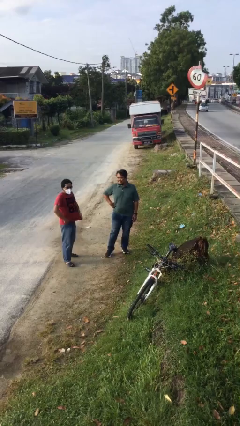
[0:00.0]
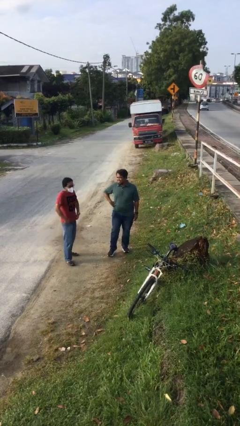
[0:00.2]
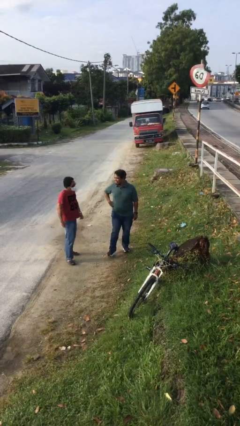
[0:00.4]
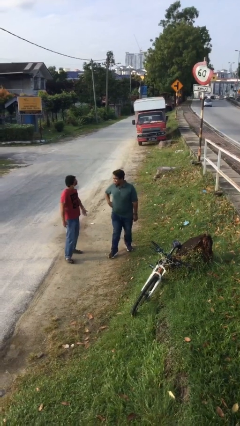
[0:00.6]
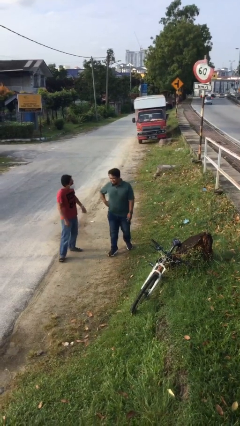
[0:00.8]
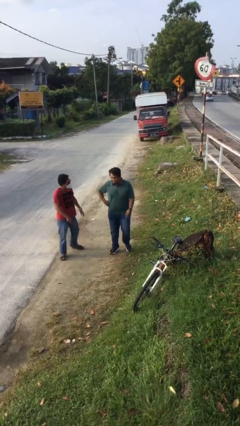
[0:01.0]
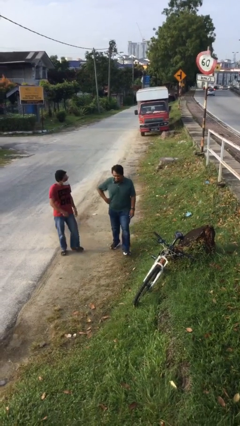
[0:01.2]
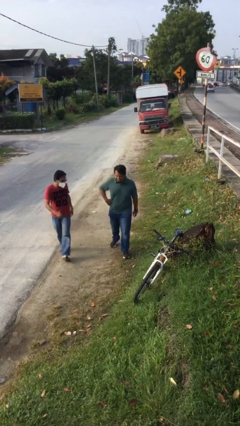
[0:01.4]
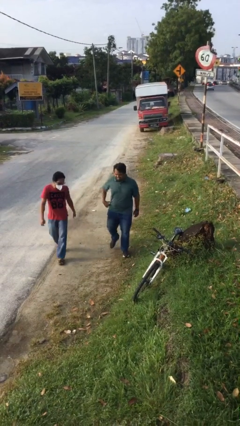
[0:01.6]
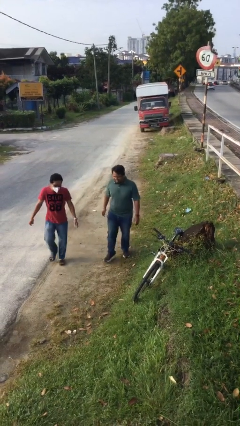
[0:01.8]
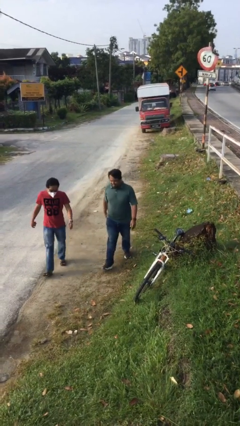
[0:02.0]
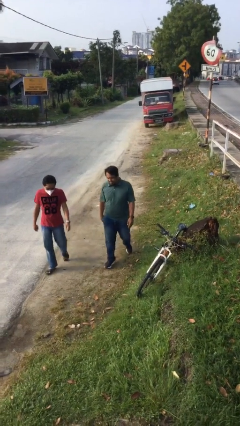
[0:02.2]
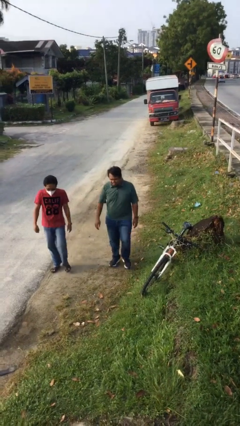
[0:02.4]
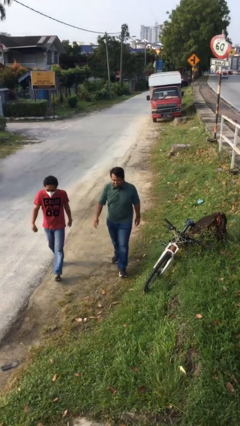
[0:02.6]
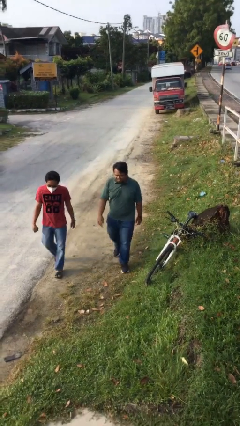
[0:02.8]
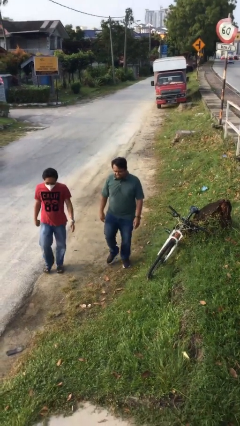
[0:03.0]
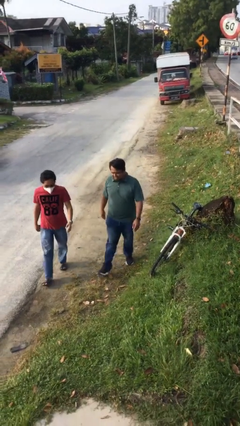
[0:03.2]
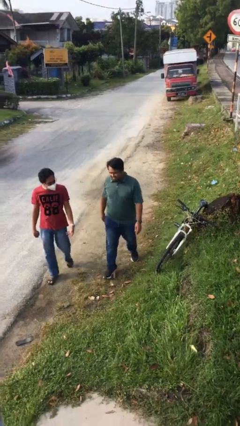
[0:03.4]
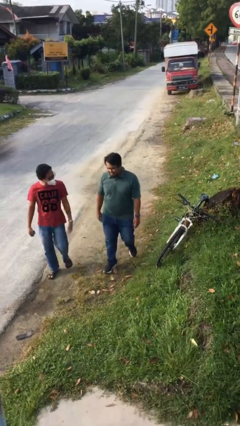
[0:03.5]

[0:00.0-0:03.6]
person talks to person

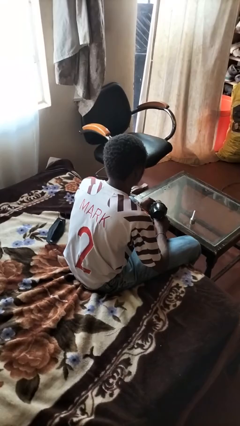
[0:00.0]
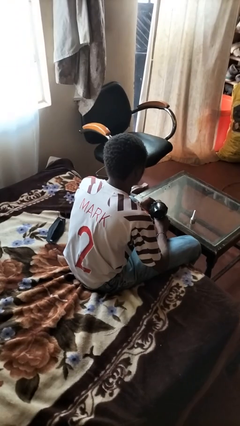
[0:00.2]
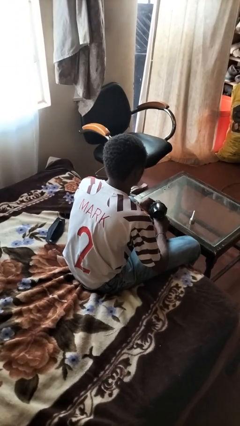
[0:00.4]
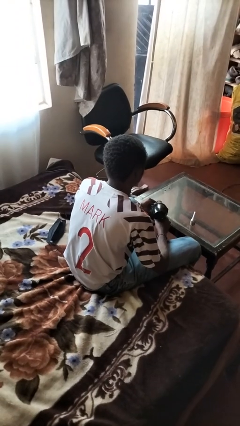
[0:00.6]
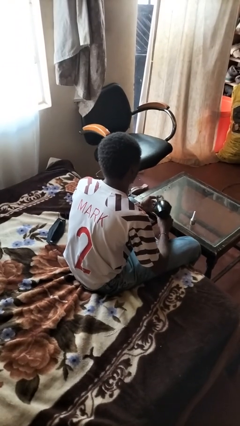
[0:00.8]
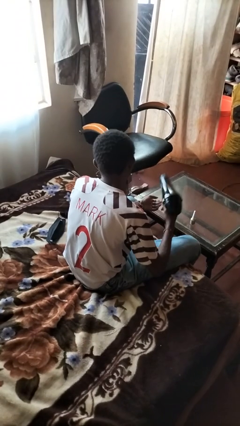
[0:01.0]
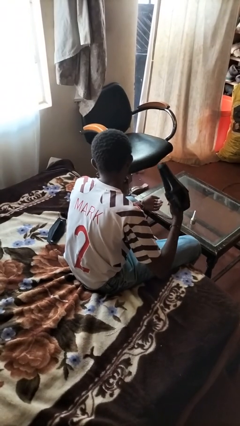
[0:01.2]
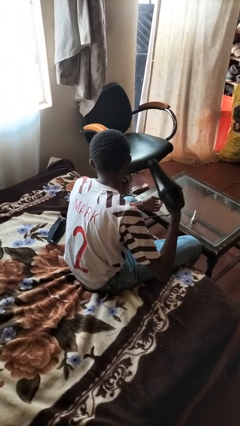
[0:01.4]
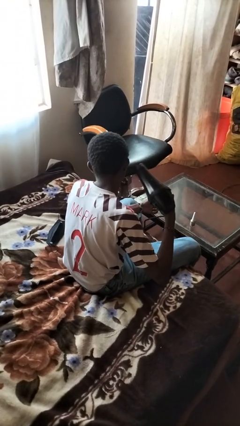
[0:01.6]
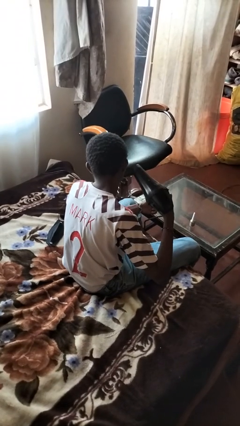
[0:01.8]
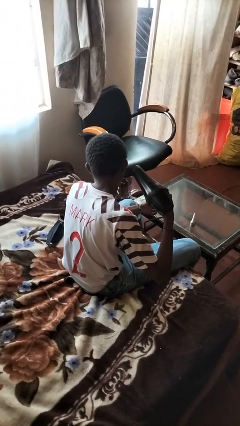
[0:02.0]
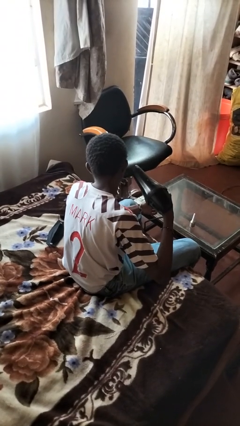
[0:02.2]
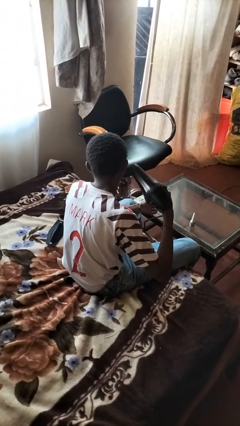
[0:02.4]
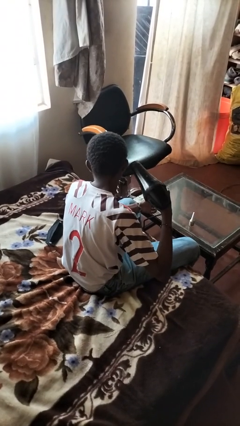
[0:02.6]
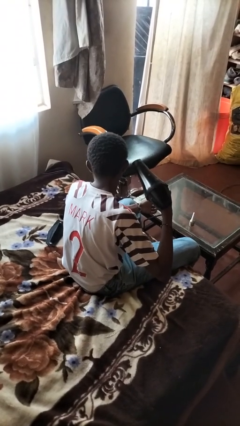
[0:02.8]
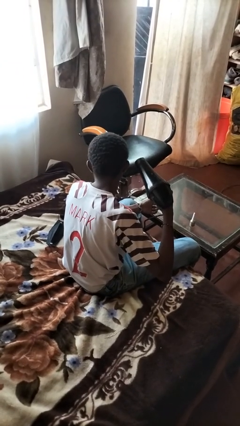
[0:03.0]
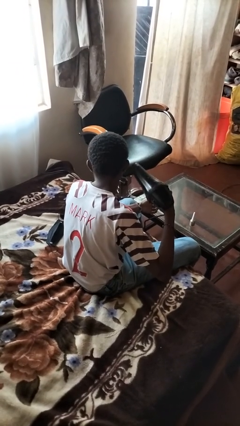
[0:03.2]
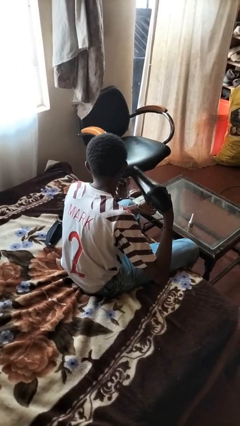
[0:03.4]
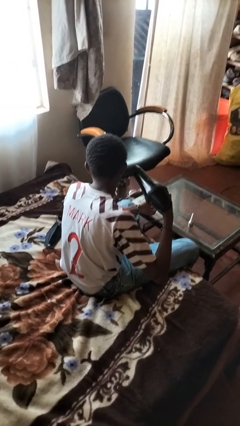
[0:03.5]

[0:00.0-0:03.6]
person dries hair with hairdryer

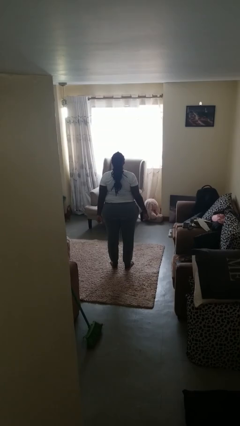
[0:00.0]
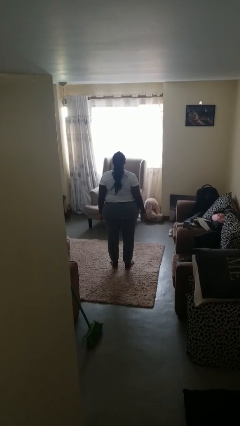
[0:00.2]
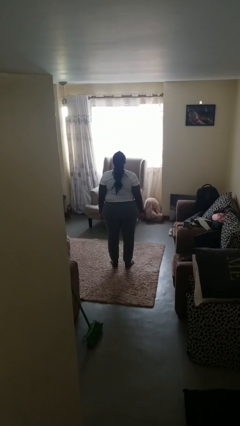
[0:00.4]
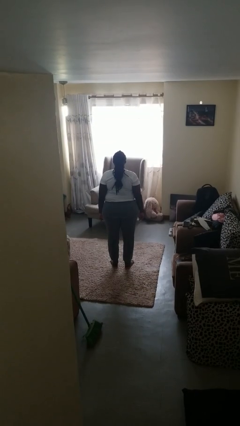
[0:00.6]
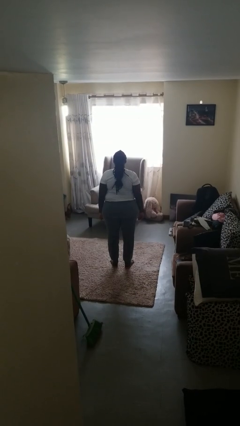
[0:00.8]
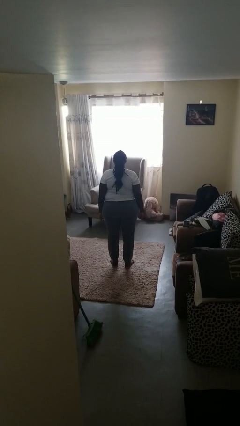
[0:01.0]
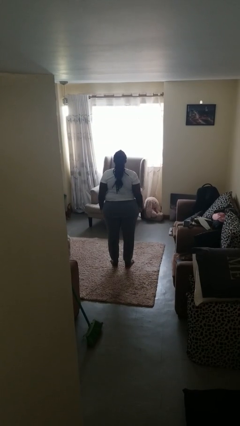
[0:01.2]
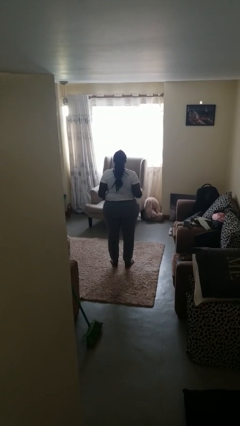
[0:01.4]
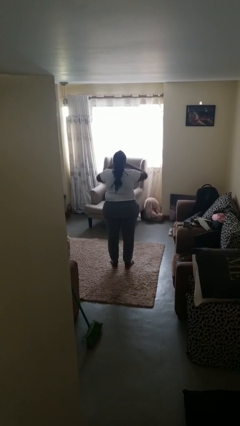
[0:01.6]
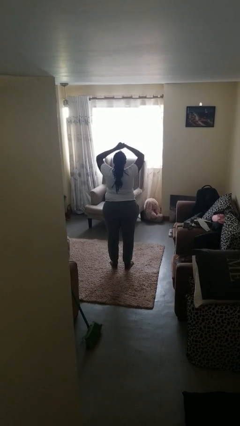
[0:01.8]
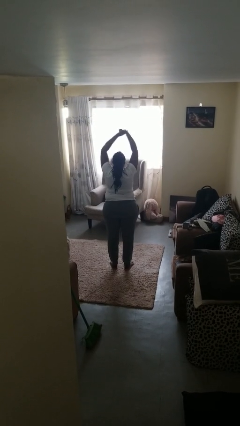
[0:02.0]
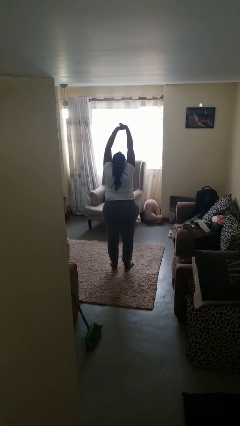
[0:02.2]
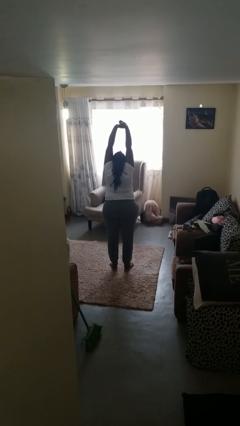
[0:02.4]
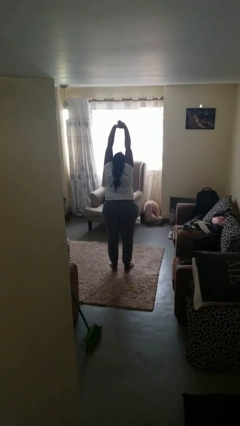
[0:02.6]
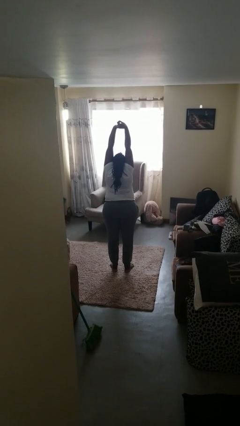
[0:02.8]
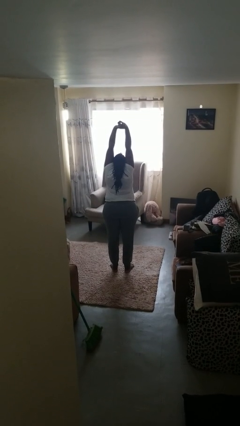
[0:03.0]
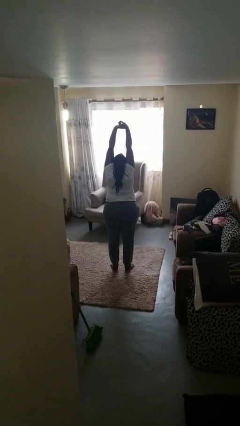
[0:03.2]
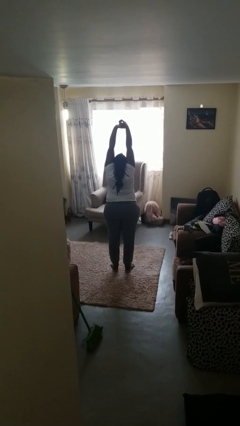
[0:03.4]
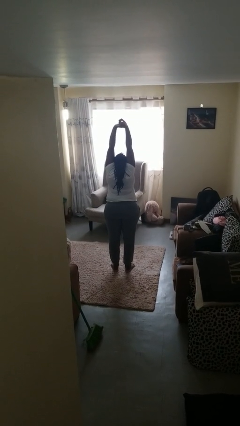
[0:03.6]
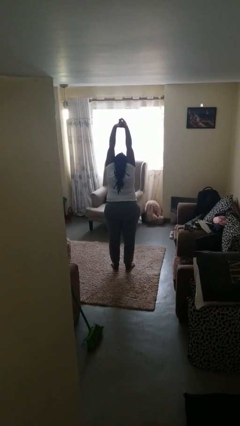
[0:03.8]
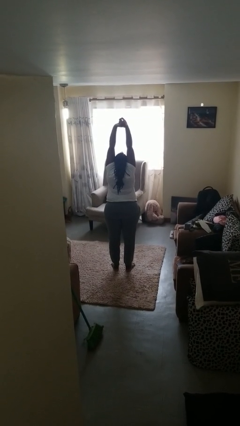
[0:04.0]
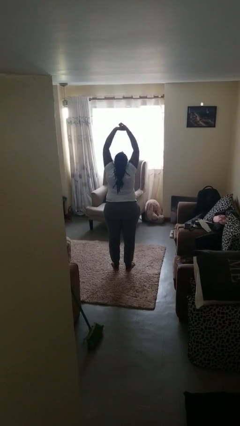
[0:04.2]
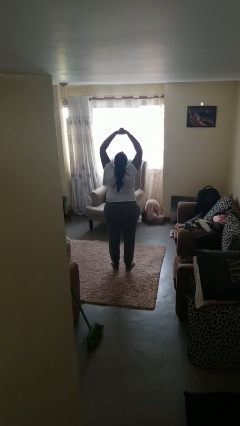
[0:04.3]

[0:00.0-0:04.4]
person stretches arms over head

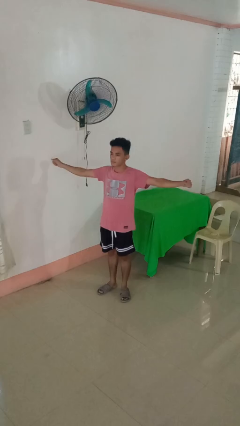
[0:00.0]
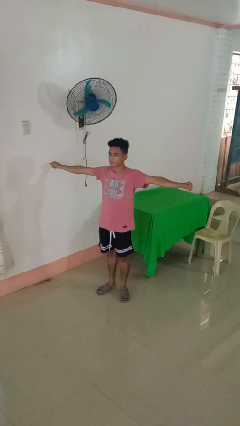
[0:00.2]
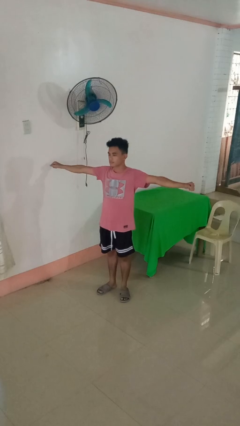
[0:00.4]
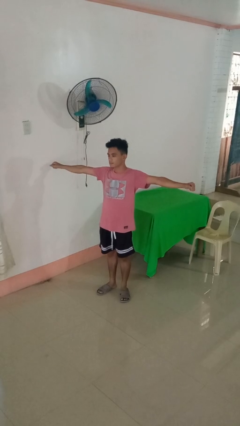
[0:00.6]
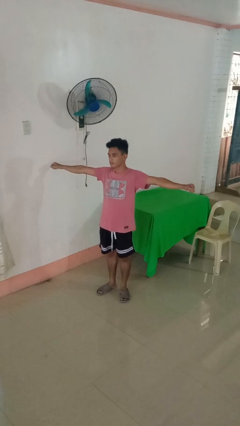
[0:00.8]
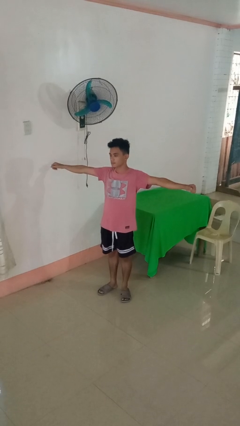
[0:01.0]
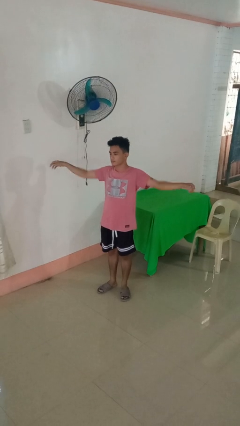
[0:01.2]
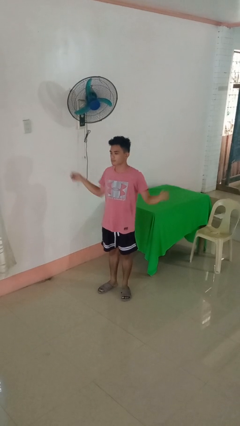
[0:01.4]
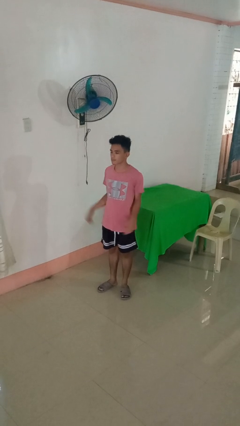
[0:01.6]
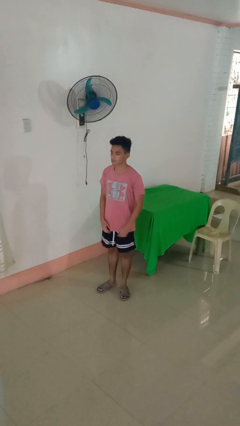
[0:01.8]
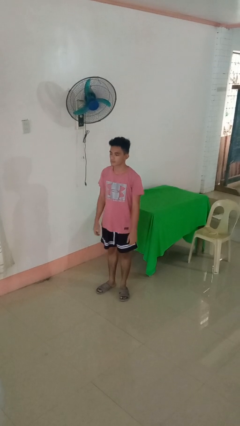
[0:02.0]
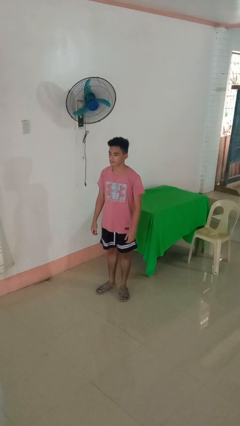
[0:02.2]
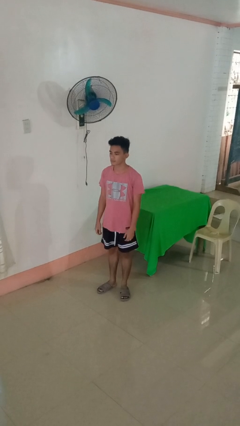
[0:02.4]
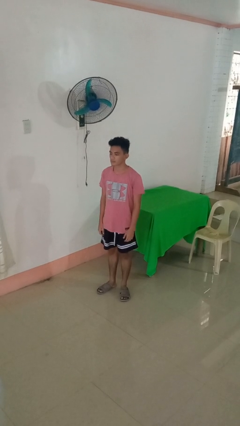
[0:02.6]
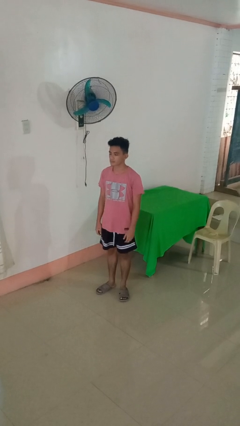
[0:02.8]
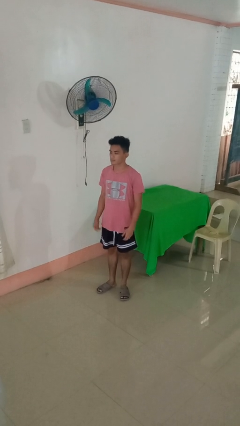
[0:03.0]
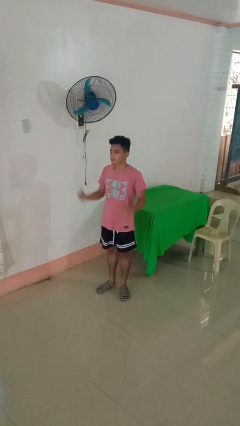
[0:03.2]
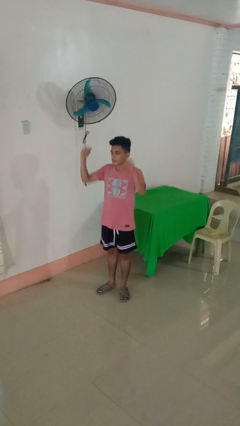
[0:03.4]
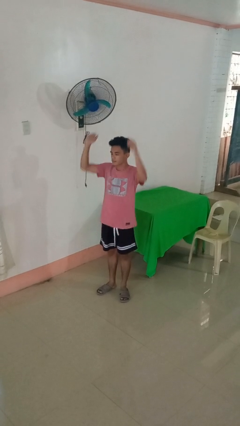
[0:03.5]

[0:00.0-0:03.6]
person stretches arms to side

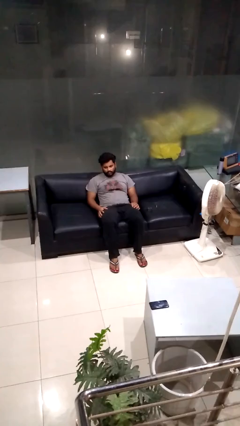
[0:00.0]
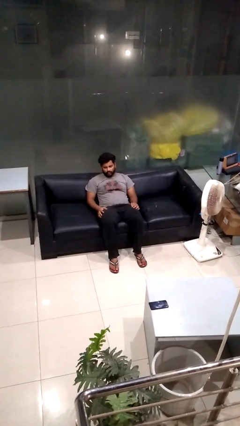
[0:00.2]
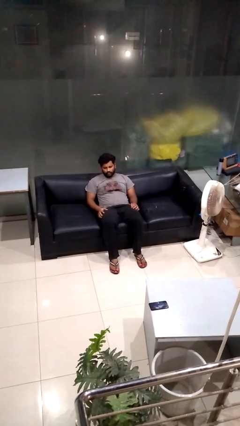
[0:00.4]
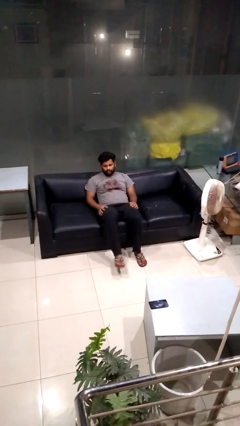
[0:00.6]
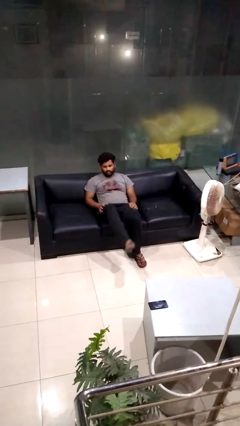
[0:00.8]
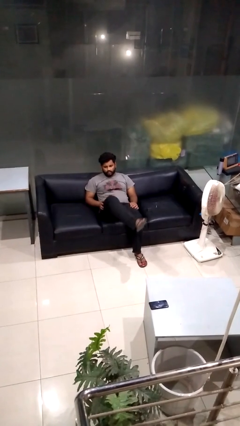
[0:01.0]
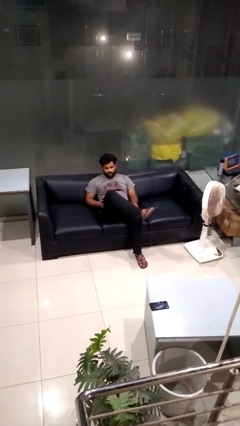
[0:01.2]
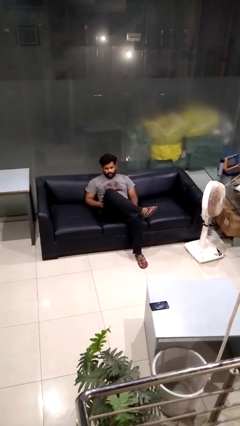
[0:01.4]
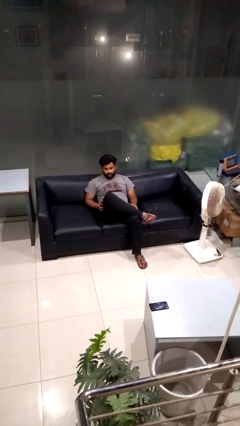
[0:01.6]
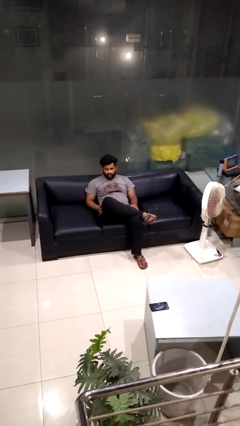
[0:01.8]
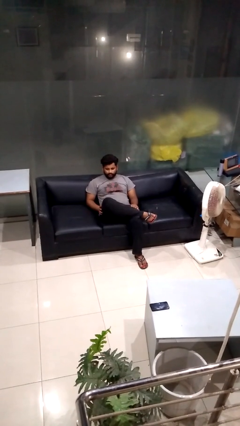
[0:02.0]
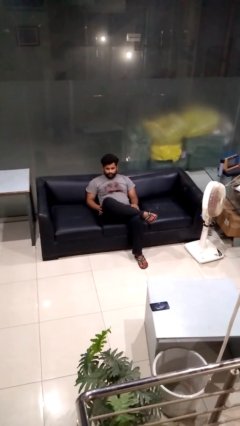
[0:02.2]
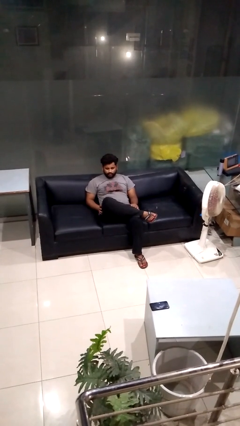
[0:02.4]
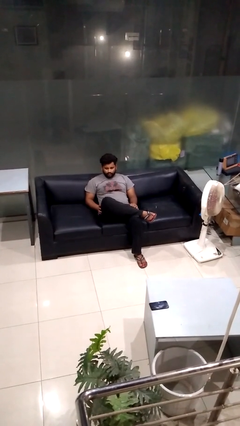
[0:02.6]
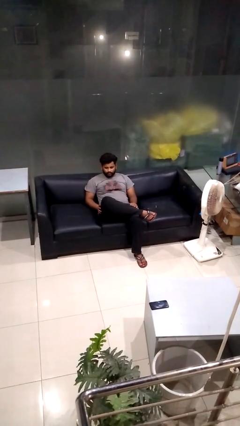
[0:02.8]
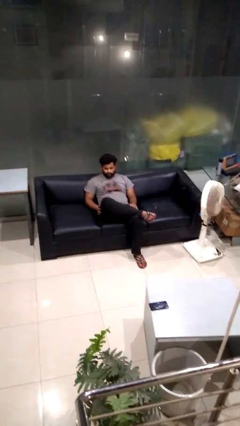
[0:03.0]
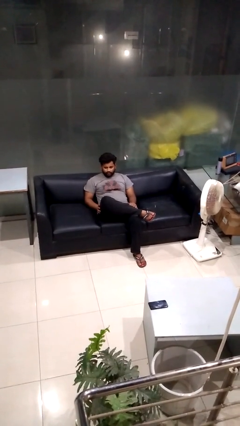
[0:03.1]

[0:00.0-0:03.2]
person crosses legs
